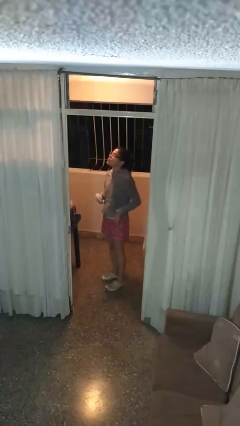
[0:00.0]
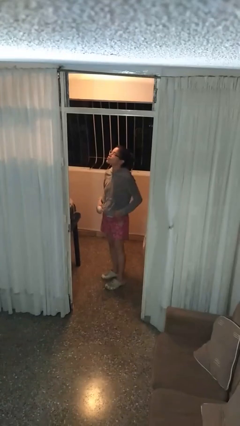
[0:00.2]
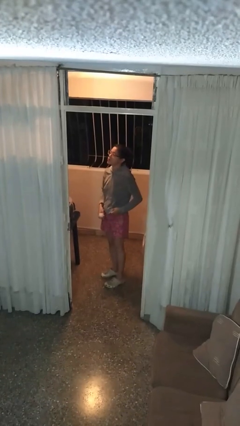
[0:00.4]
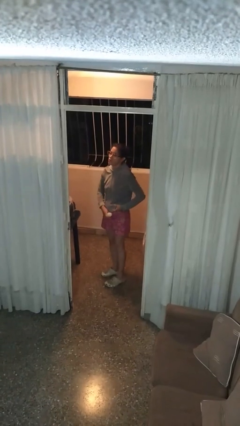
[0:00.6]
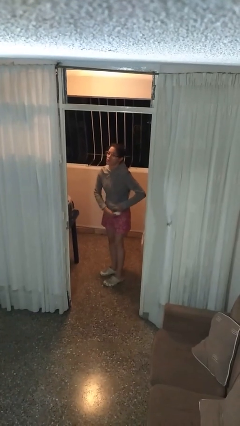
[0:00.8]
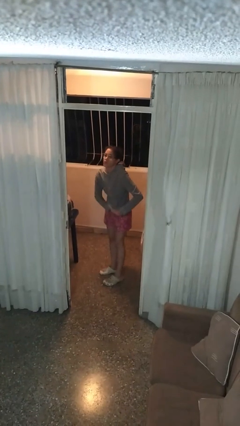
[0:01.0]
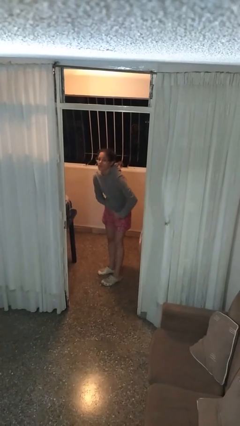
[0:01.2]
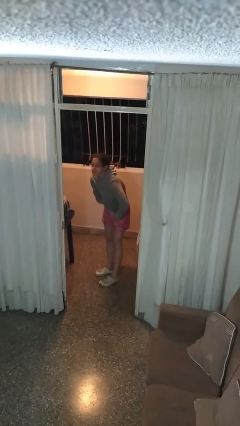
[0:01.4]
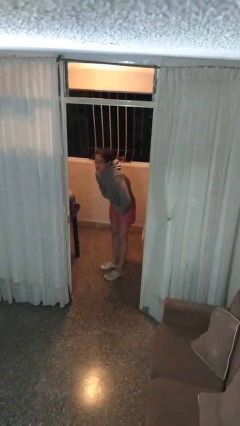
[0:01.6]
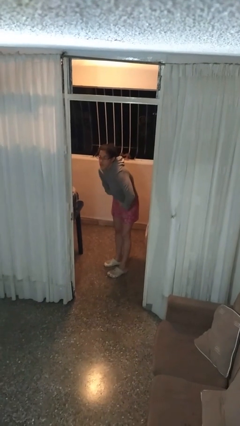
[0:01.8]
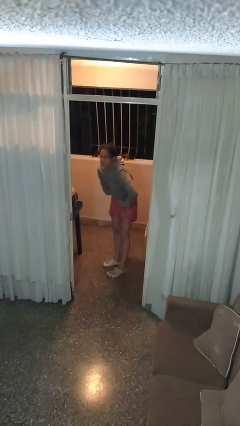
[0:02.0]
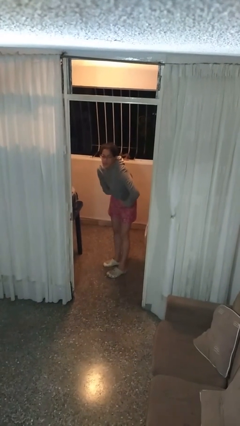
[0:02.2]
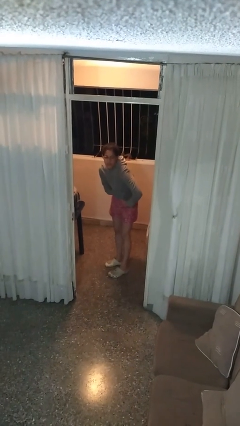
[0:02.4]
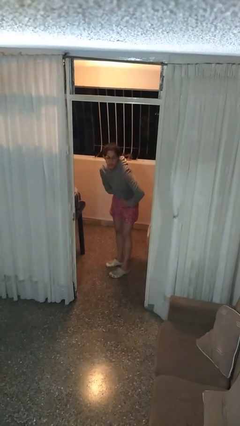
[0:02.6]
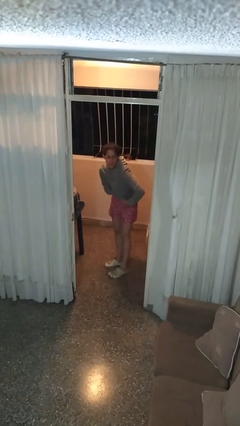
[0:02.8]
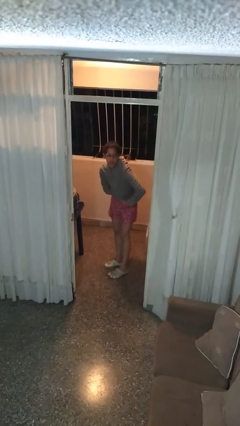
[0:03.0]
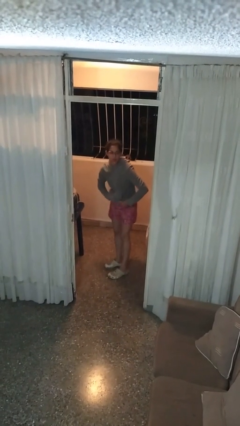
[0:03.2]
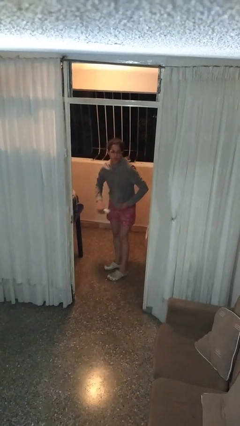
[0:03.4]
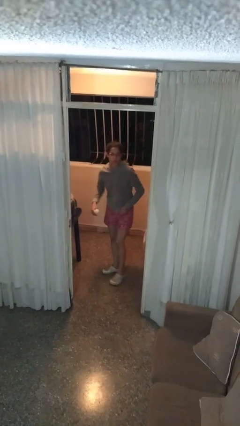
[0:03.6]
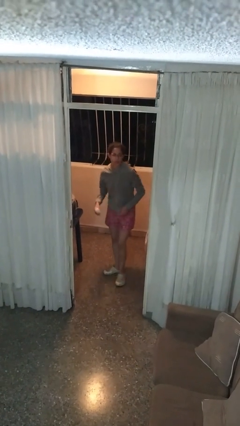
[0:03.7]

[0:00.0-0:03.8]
person applies deodorant

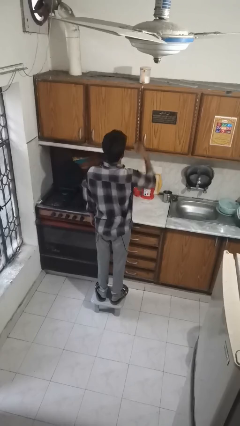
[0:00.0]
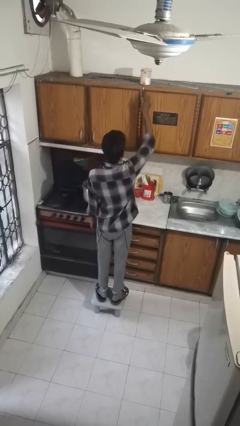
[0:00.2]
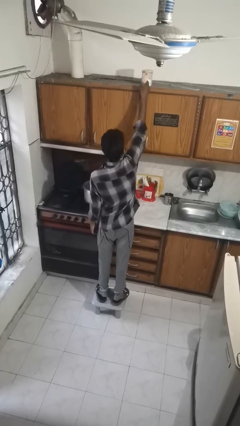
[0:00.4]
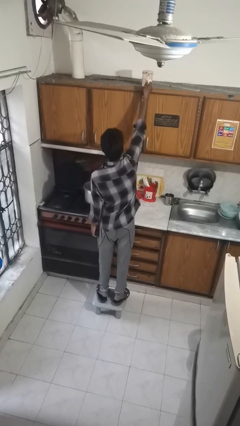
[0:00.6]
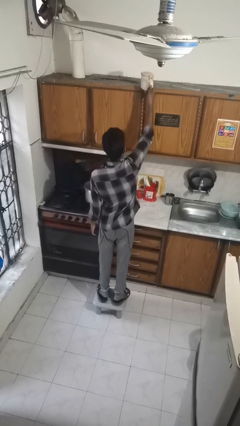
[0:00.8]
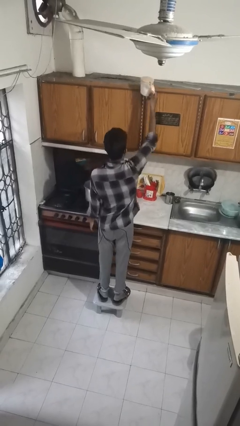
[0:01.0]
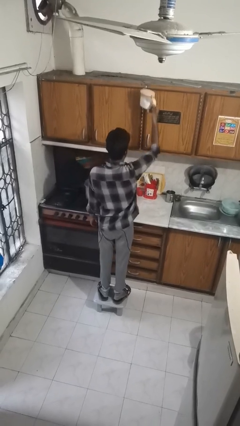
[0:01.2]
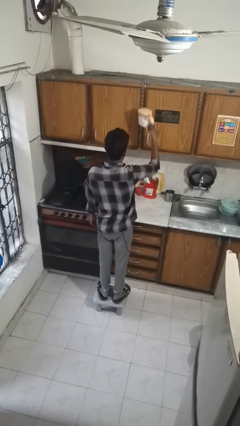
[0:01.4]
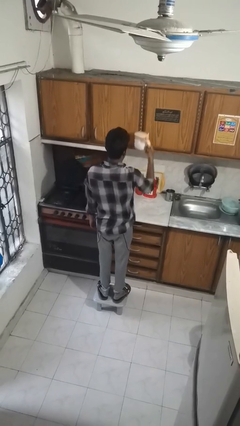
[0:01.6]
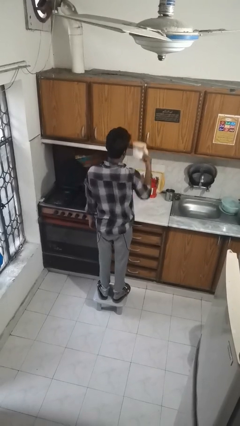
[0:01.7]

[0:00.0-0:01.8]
person picks up object from shelf

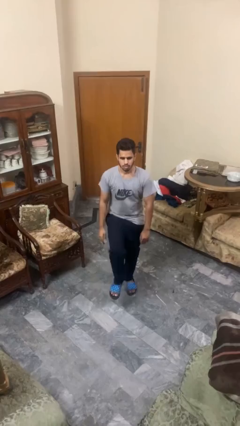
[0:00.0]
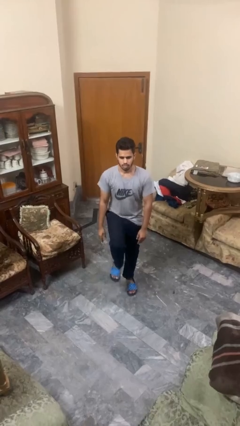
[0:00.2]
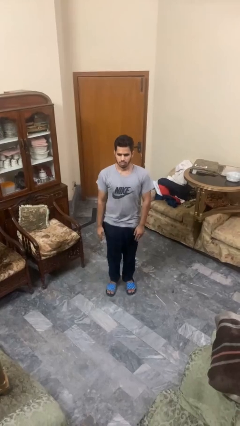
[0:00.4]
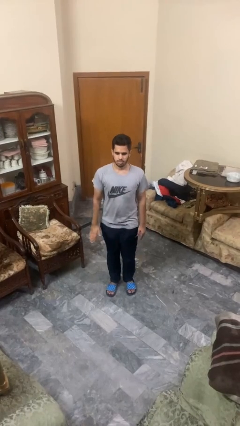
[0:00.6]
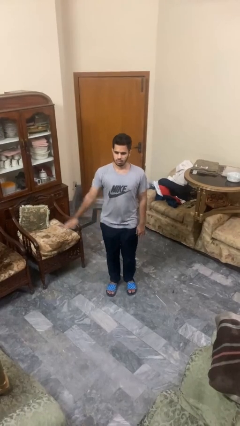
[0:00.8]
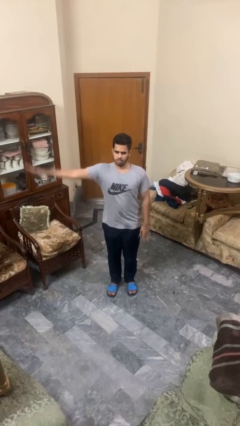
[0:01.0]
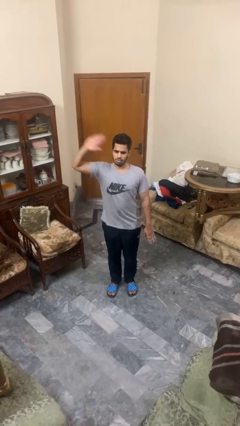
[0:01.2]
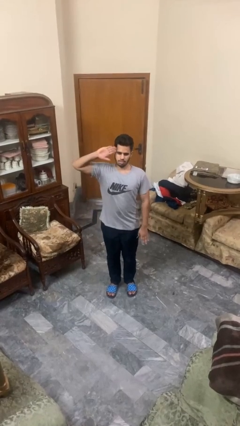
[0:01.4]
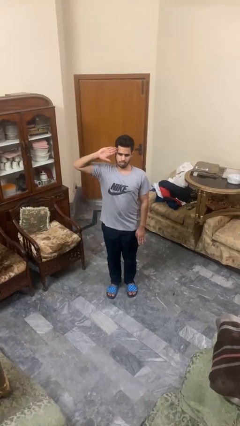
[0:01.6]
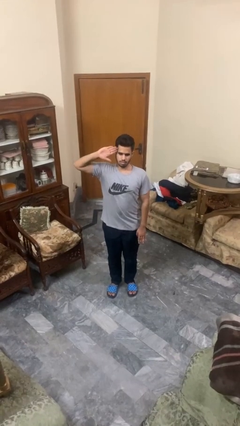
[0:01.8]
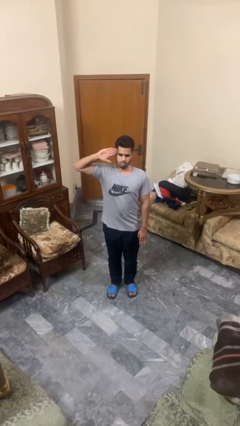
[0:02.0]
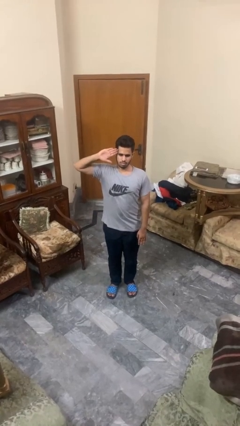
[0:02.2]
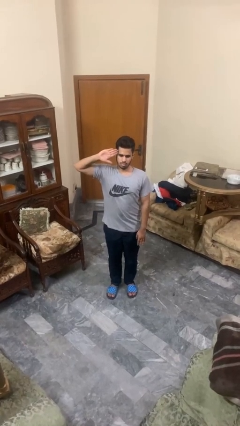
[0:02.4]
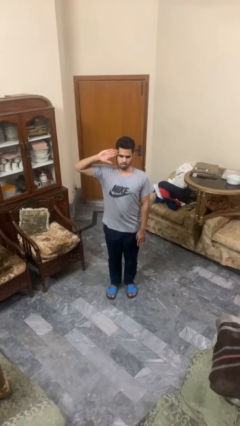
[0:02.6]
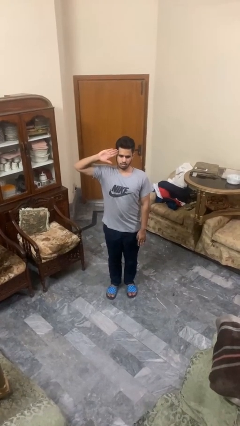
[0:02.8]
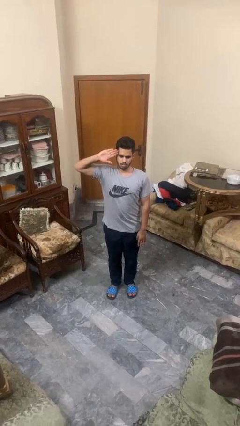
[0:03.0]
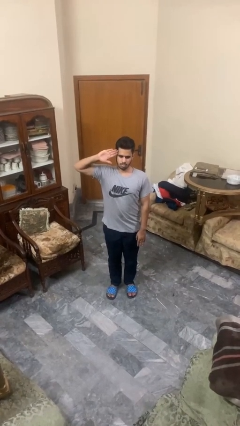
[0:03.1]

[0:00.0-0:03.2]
person salutes

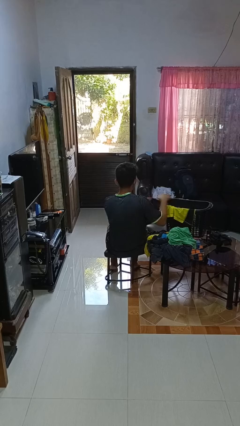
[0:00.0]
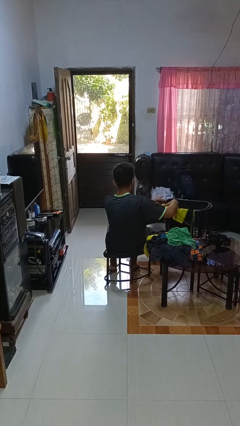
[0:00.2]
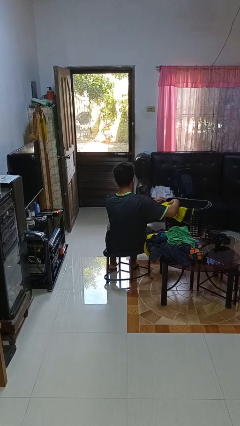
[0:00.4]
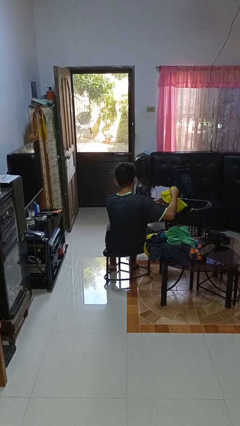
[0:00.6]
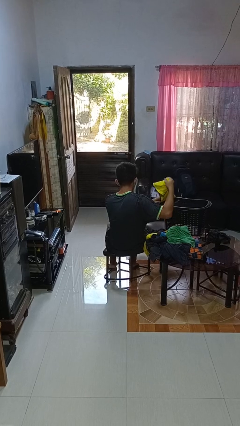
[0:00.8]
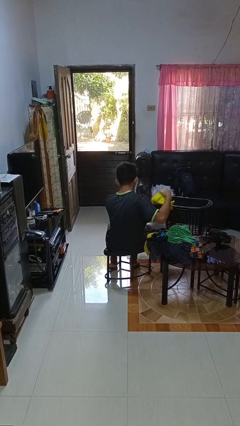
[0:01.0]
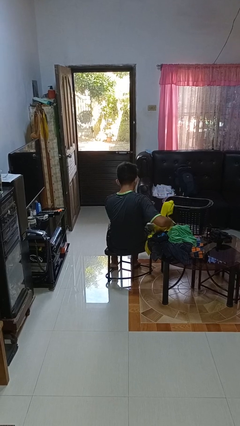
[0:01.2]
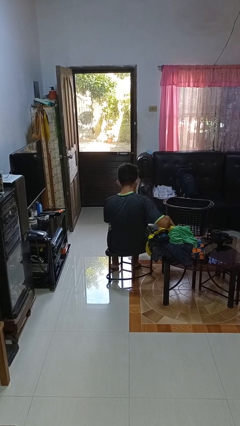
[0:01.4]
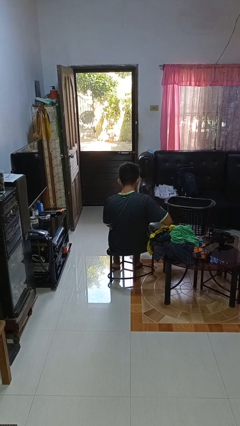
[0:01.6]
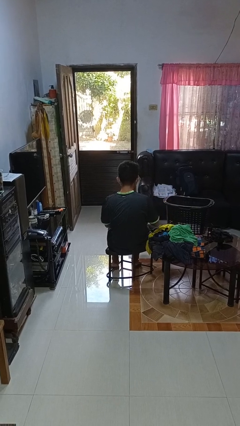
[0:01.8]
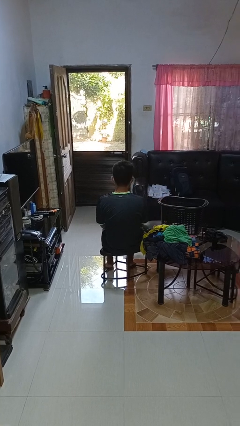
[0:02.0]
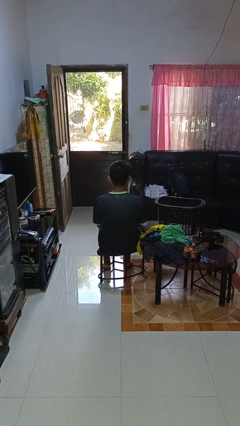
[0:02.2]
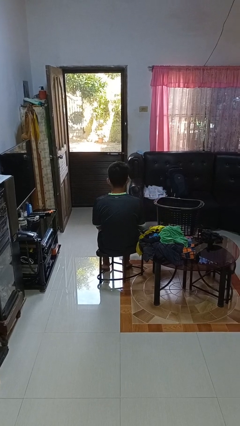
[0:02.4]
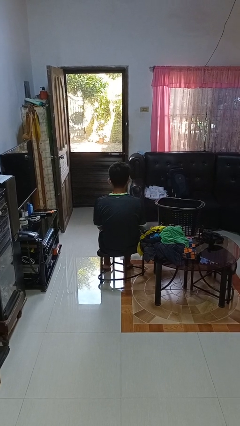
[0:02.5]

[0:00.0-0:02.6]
person takes object from basket

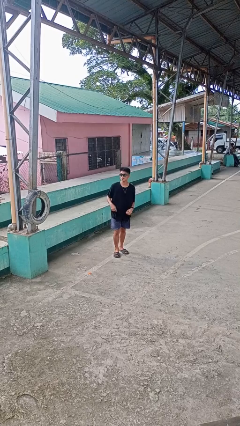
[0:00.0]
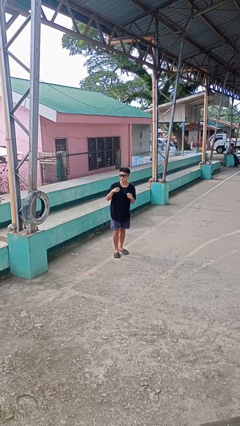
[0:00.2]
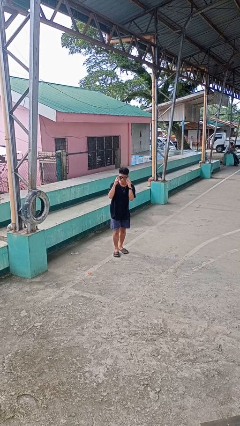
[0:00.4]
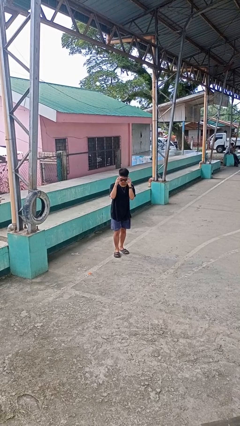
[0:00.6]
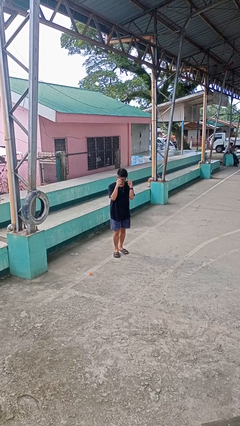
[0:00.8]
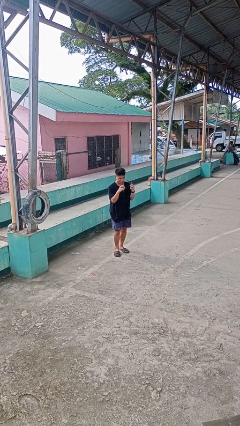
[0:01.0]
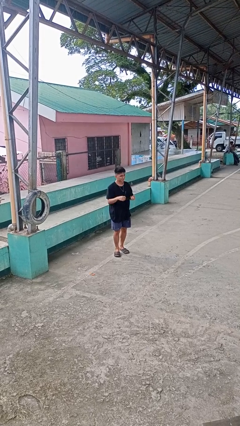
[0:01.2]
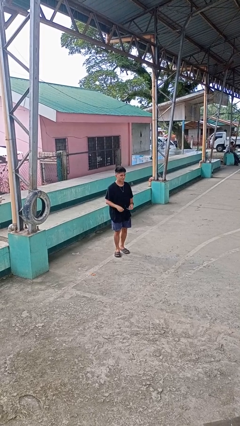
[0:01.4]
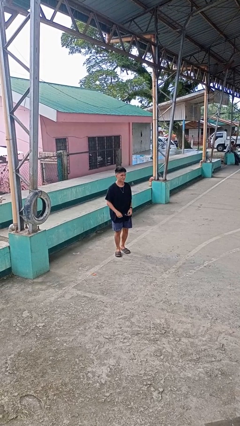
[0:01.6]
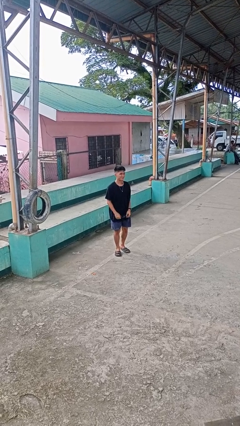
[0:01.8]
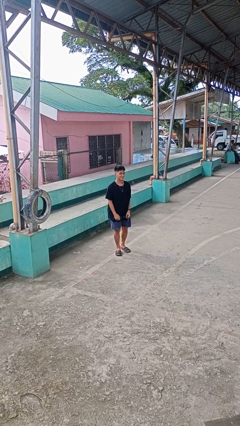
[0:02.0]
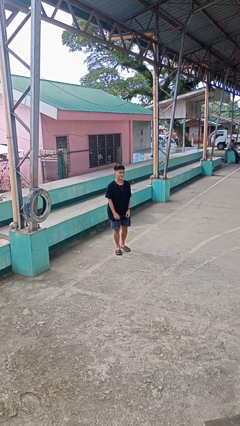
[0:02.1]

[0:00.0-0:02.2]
person takes off sunglasses

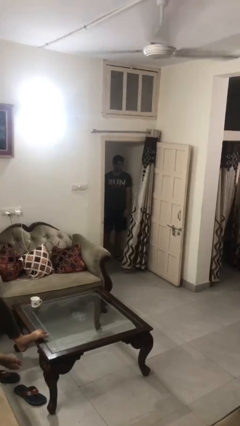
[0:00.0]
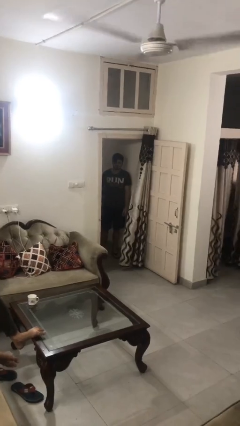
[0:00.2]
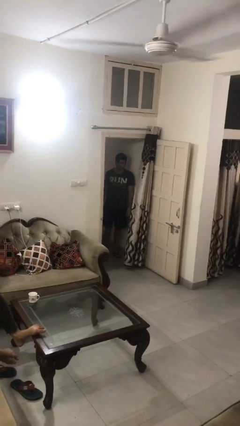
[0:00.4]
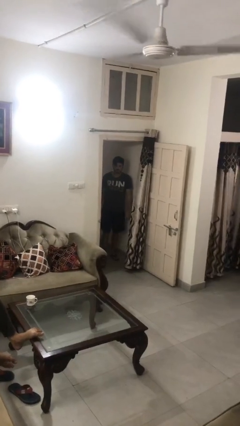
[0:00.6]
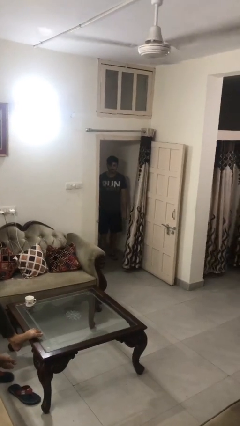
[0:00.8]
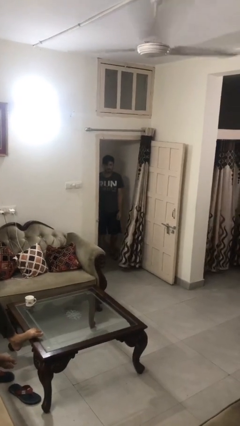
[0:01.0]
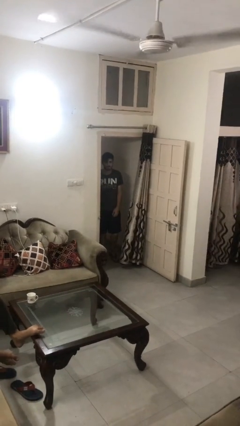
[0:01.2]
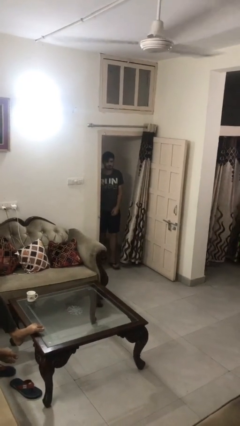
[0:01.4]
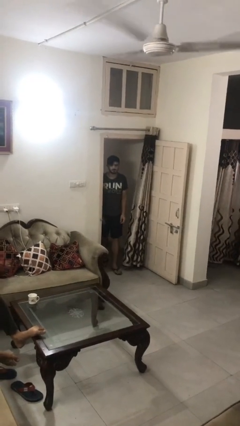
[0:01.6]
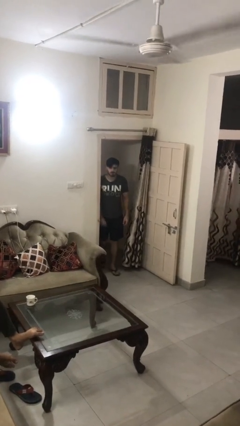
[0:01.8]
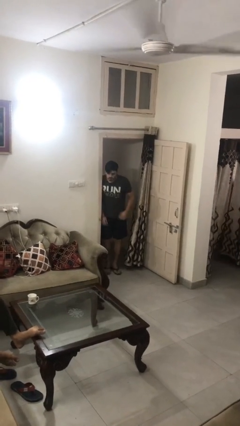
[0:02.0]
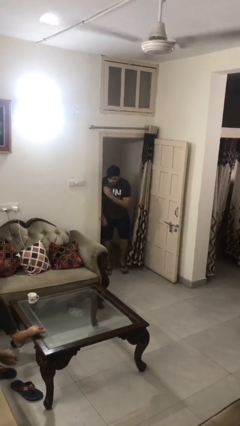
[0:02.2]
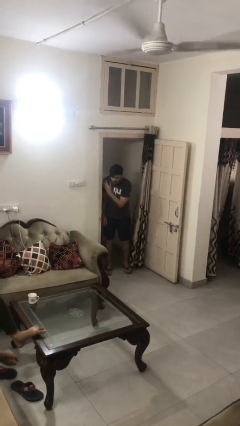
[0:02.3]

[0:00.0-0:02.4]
person bumps into wall

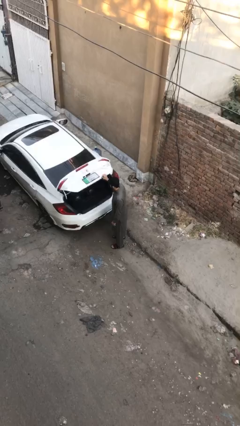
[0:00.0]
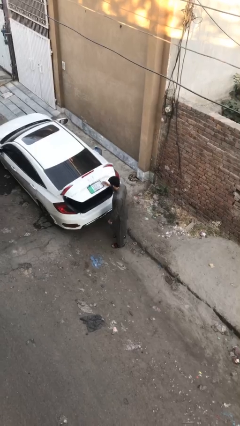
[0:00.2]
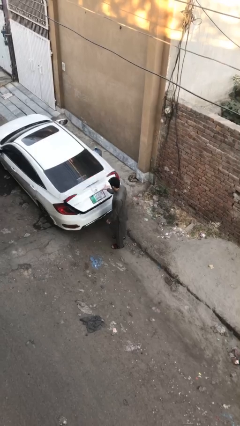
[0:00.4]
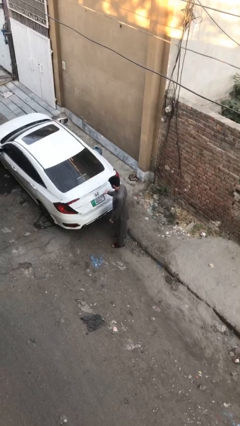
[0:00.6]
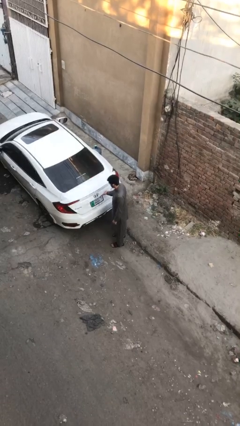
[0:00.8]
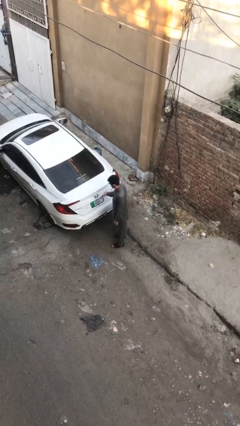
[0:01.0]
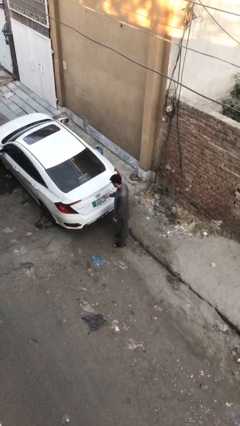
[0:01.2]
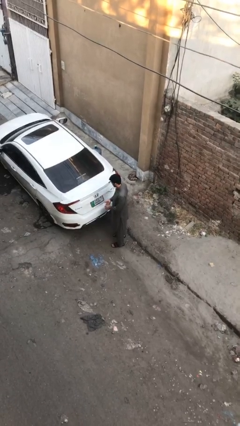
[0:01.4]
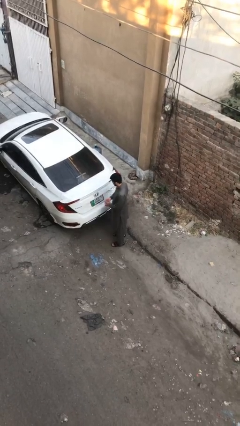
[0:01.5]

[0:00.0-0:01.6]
person closes car trunk
